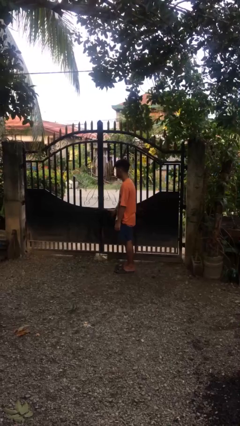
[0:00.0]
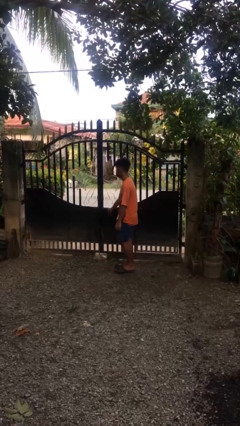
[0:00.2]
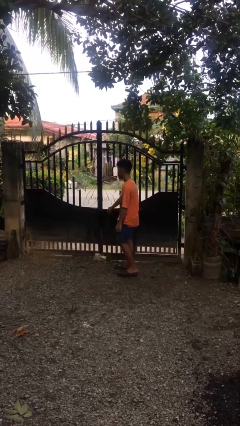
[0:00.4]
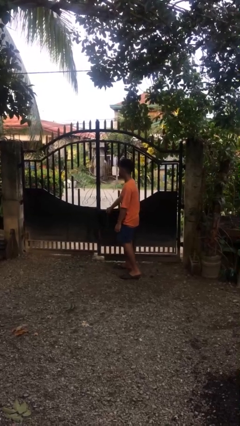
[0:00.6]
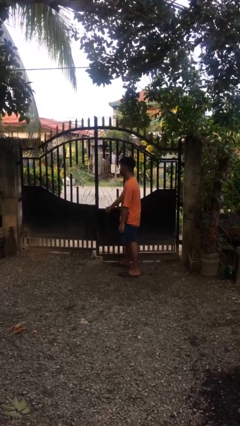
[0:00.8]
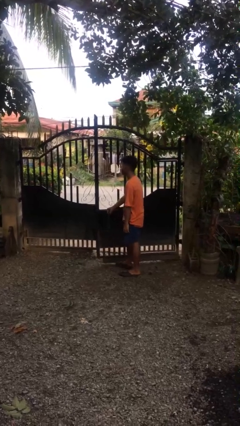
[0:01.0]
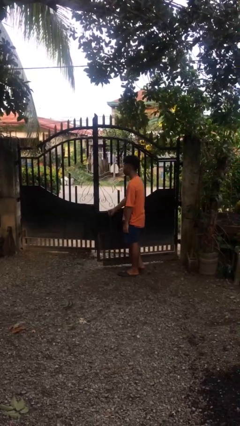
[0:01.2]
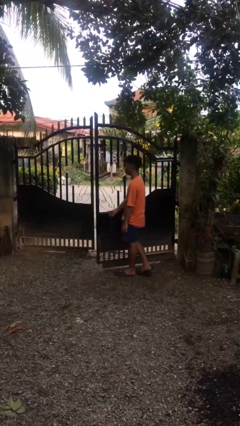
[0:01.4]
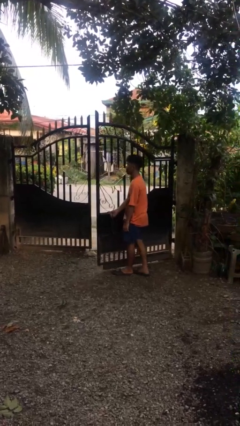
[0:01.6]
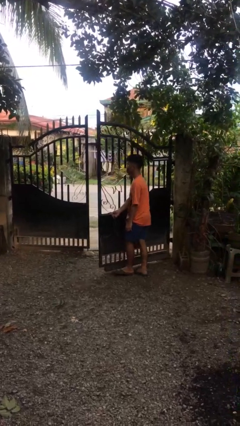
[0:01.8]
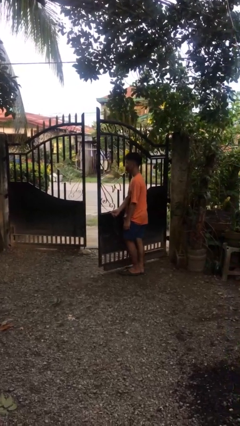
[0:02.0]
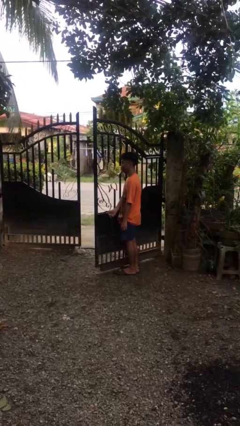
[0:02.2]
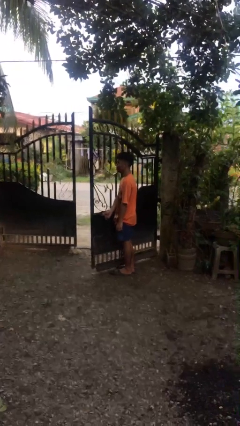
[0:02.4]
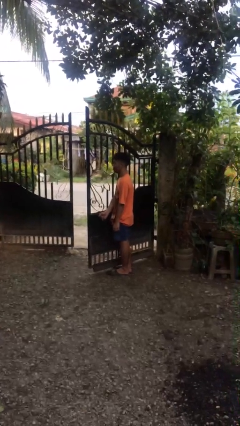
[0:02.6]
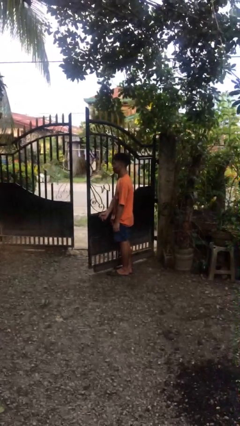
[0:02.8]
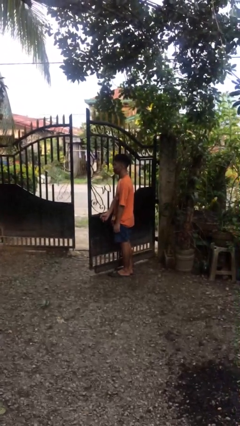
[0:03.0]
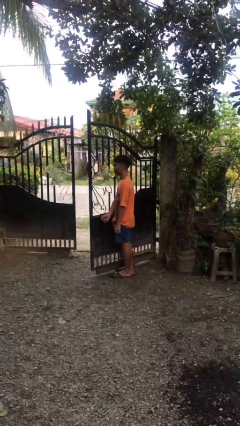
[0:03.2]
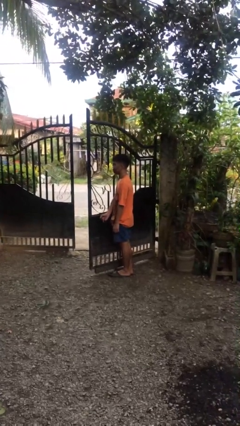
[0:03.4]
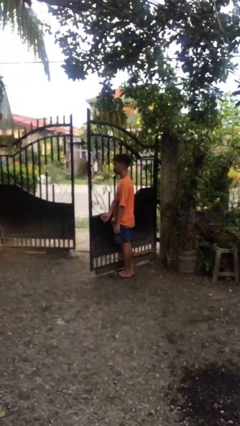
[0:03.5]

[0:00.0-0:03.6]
person opens gate

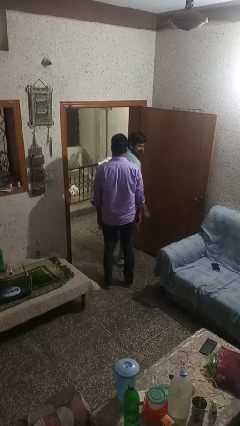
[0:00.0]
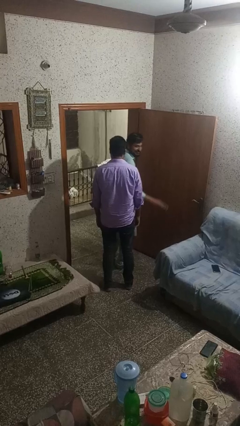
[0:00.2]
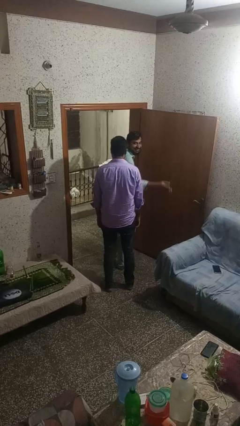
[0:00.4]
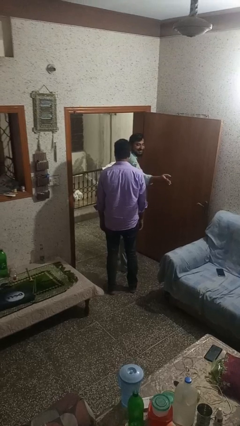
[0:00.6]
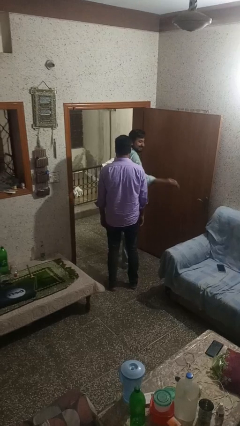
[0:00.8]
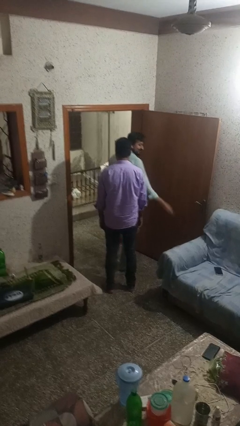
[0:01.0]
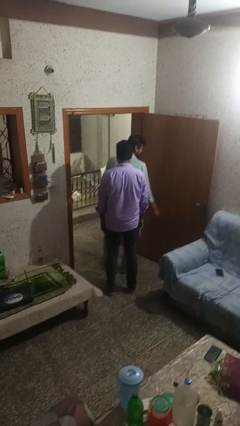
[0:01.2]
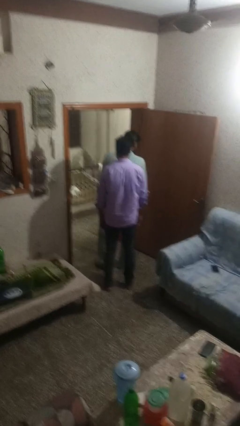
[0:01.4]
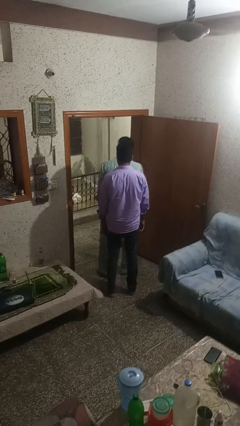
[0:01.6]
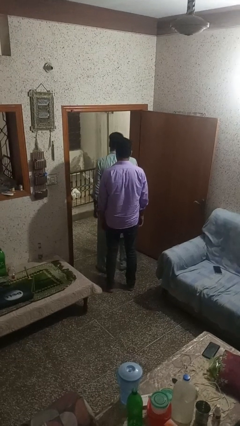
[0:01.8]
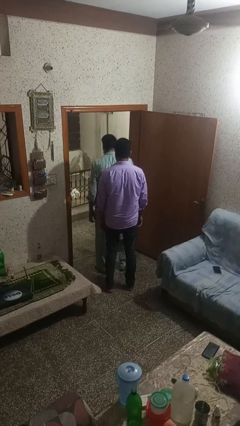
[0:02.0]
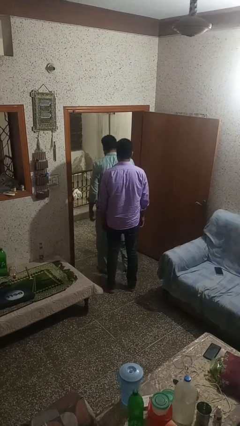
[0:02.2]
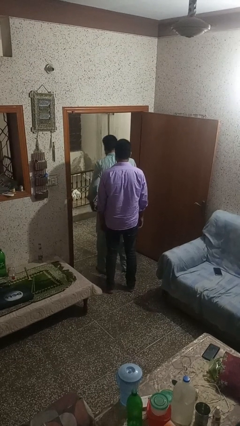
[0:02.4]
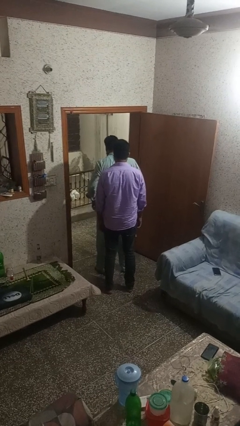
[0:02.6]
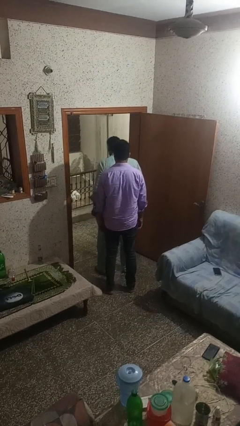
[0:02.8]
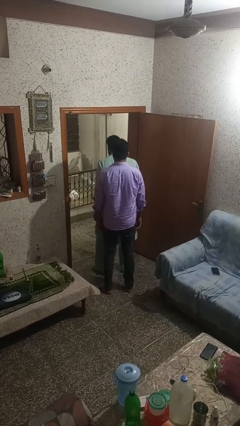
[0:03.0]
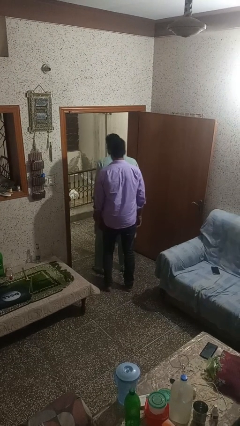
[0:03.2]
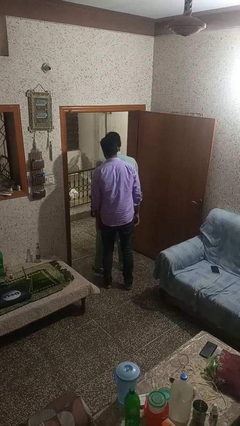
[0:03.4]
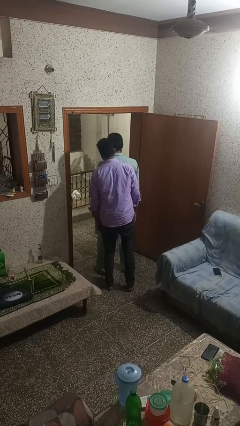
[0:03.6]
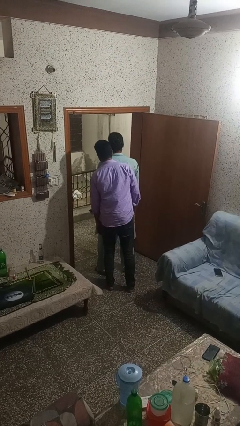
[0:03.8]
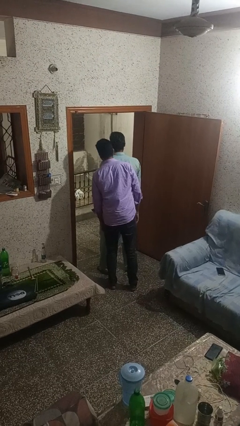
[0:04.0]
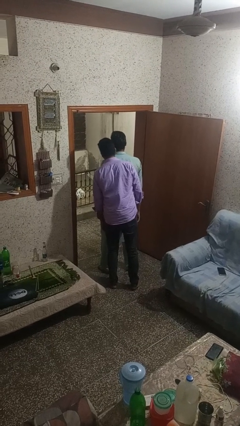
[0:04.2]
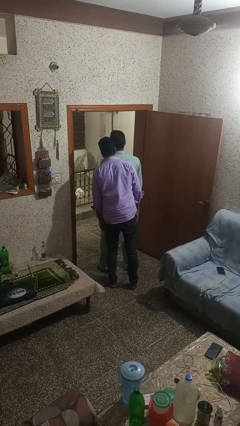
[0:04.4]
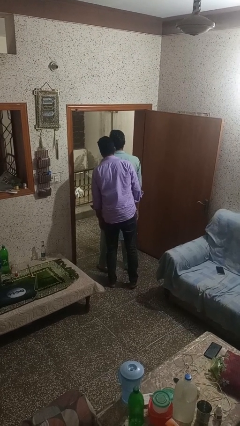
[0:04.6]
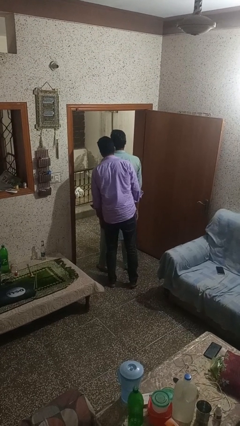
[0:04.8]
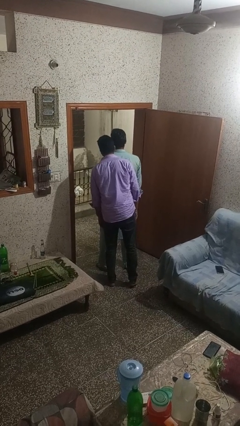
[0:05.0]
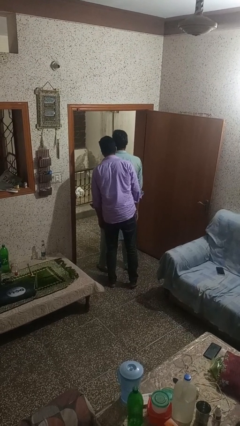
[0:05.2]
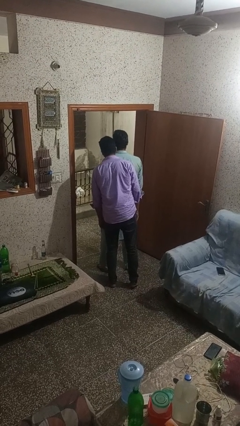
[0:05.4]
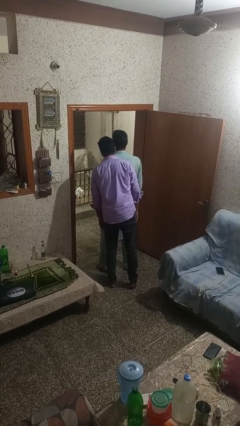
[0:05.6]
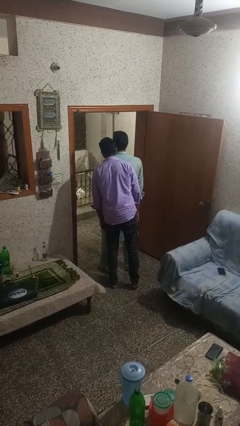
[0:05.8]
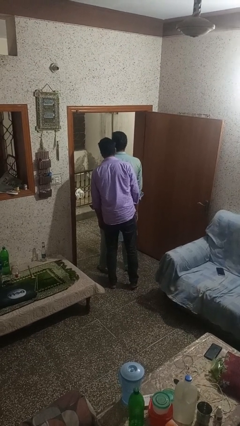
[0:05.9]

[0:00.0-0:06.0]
person looks over shoulder

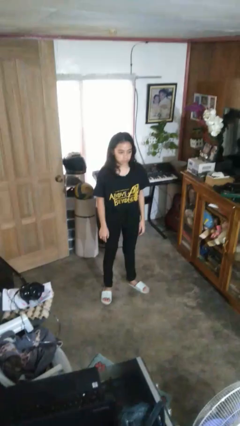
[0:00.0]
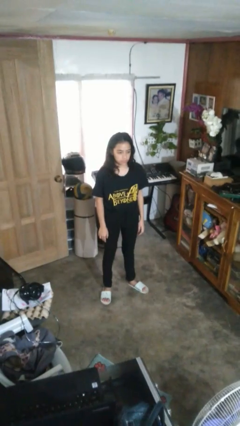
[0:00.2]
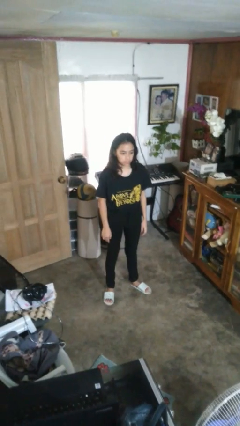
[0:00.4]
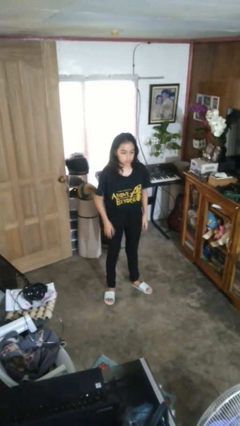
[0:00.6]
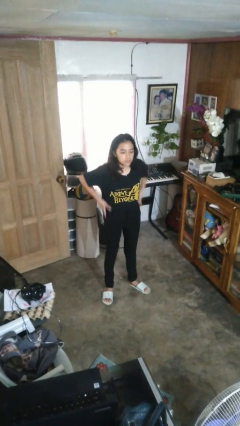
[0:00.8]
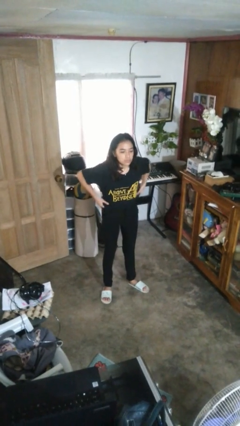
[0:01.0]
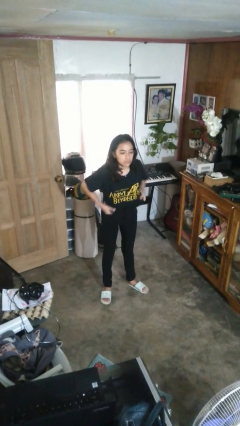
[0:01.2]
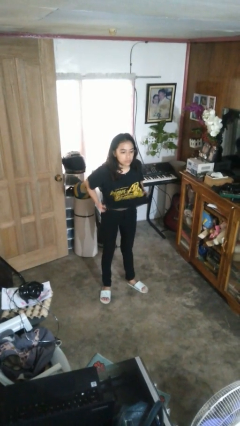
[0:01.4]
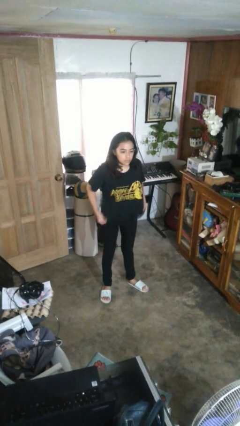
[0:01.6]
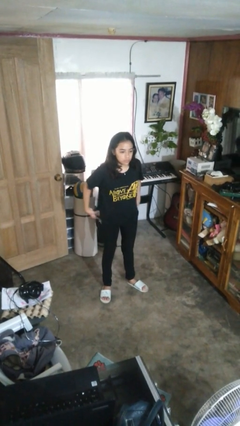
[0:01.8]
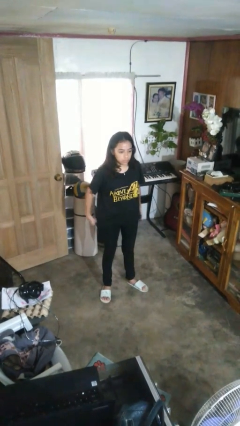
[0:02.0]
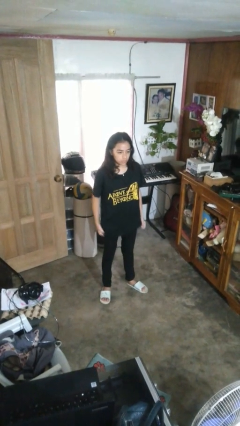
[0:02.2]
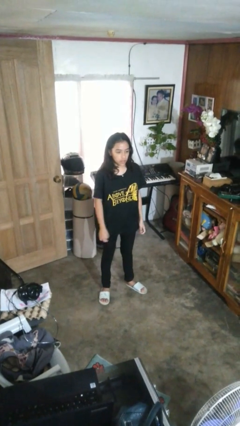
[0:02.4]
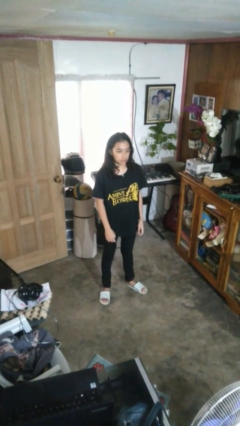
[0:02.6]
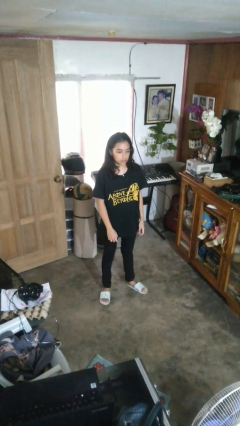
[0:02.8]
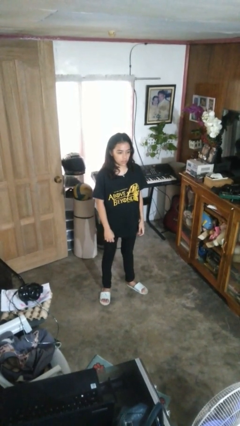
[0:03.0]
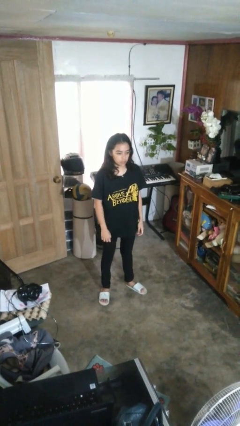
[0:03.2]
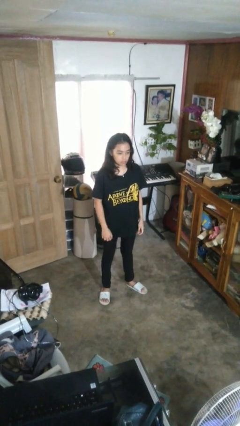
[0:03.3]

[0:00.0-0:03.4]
person untucks shirt

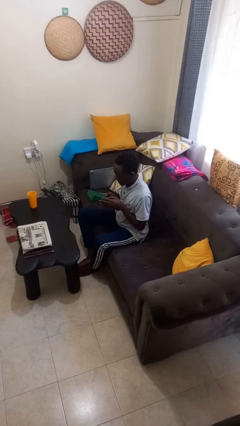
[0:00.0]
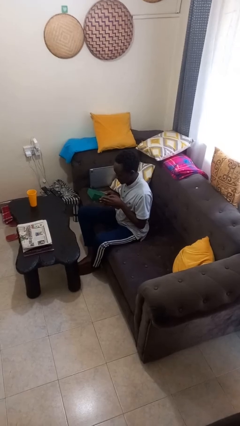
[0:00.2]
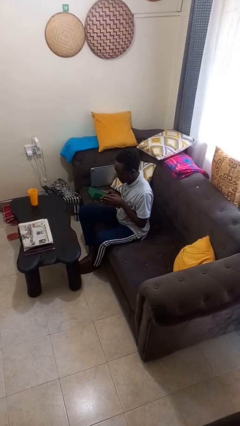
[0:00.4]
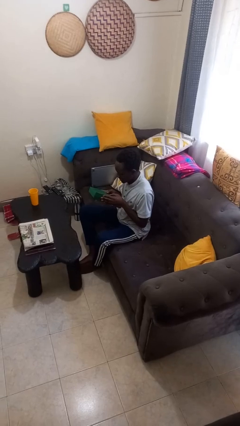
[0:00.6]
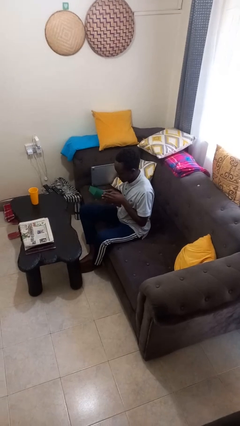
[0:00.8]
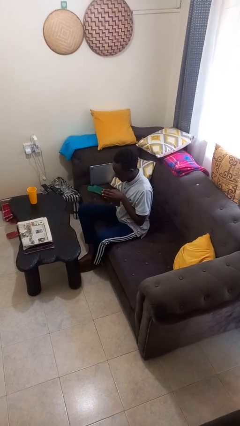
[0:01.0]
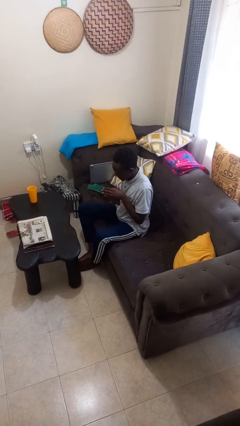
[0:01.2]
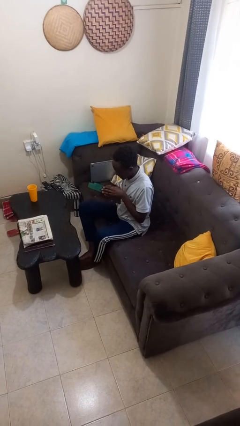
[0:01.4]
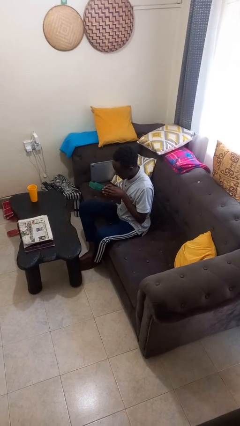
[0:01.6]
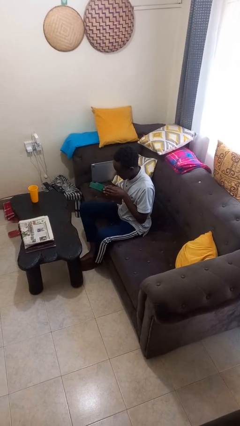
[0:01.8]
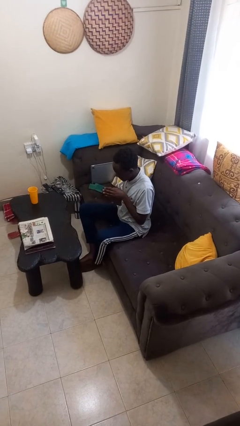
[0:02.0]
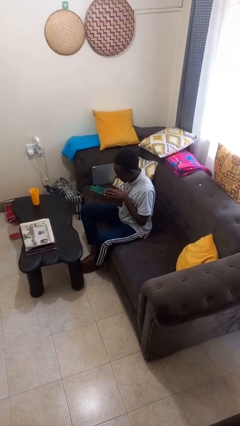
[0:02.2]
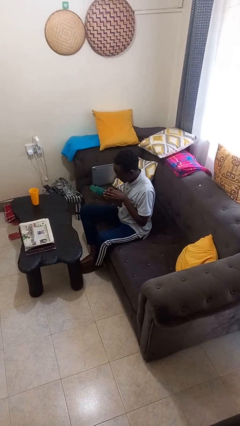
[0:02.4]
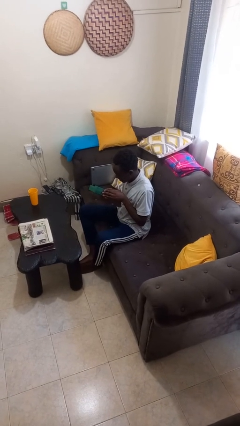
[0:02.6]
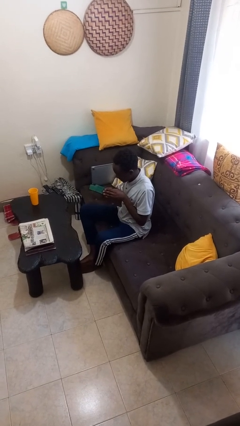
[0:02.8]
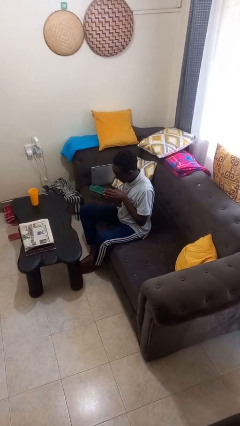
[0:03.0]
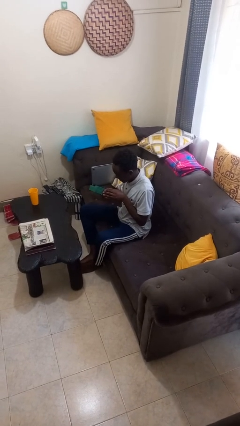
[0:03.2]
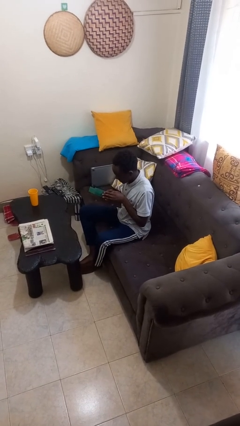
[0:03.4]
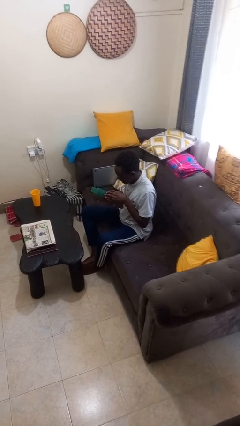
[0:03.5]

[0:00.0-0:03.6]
person interacts with handheld game

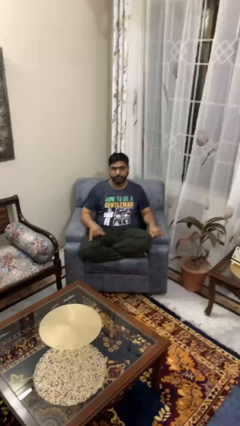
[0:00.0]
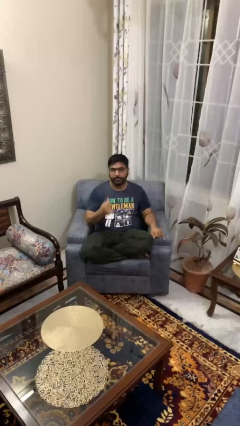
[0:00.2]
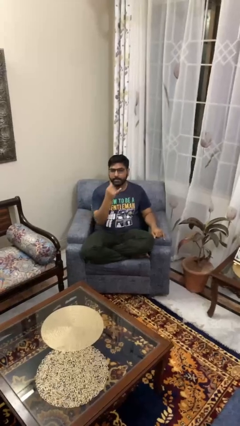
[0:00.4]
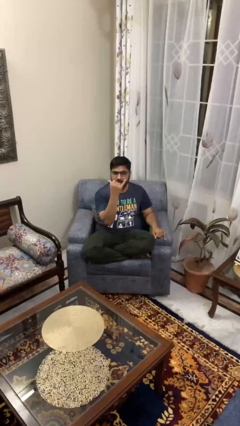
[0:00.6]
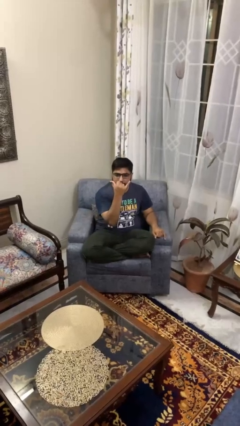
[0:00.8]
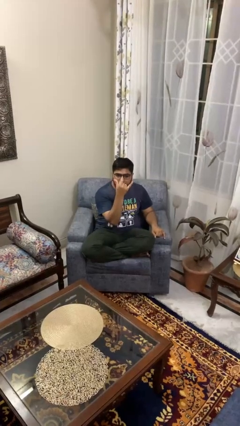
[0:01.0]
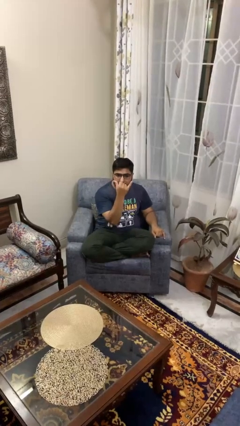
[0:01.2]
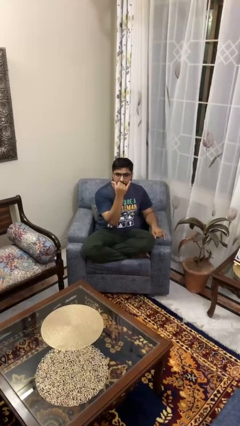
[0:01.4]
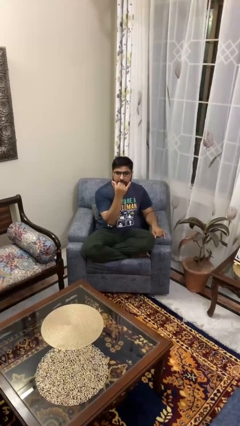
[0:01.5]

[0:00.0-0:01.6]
person gestures hang loose
